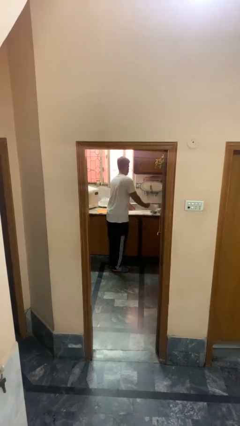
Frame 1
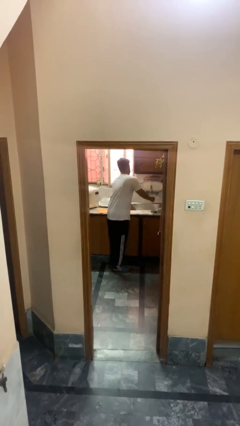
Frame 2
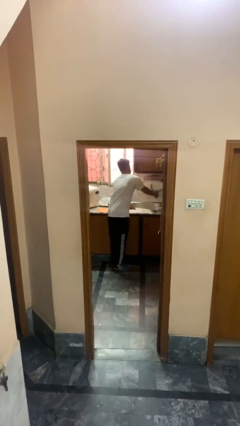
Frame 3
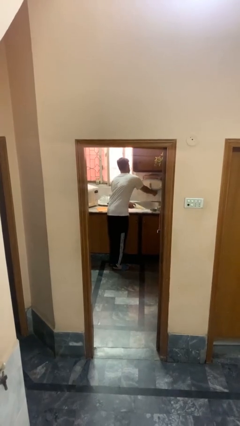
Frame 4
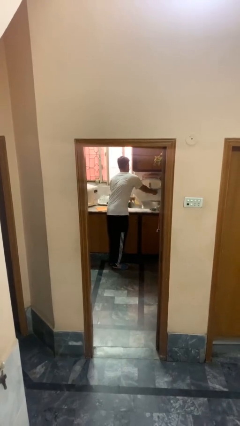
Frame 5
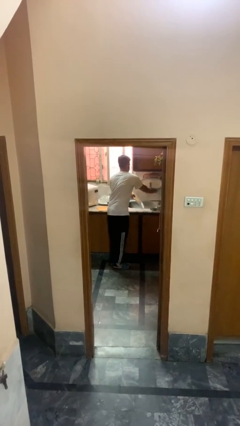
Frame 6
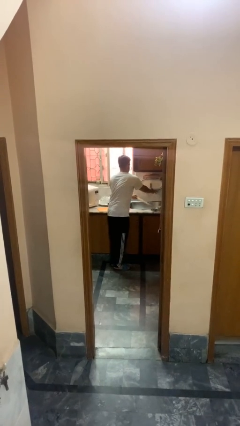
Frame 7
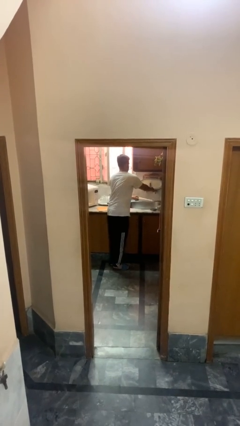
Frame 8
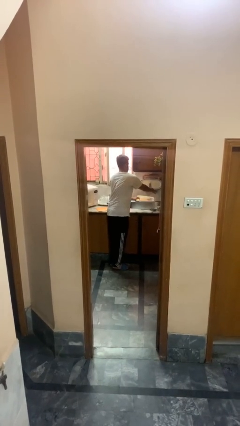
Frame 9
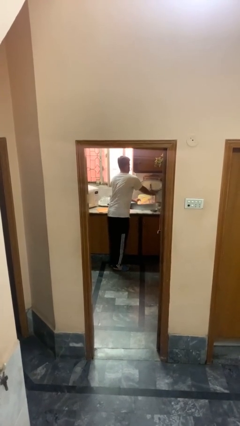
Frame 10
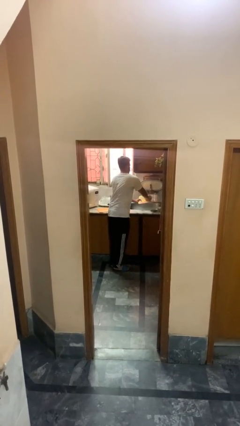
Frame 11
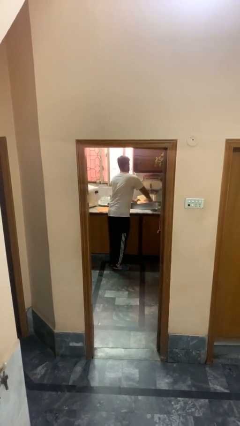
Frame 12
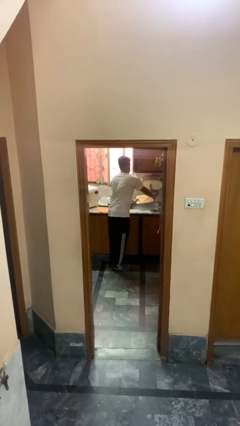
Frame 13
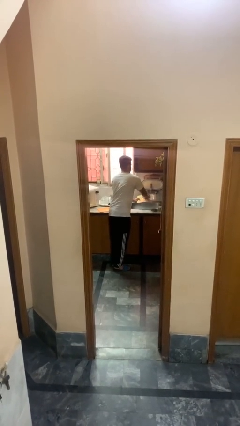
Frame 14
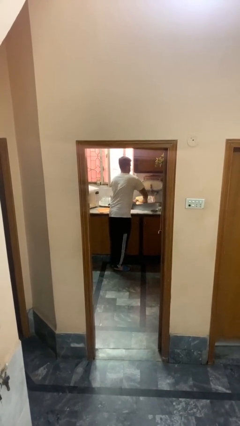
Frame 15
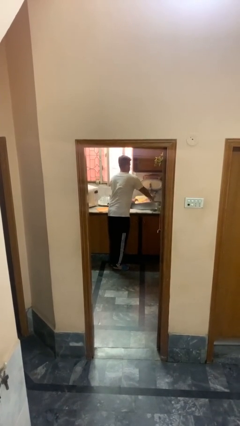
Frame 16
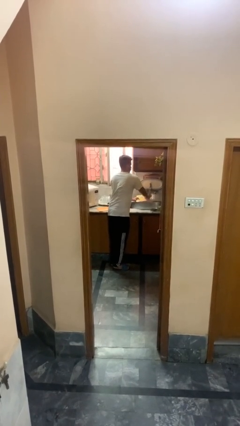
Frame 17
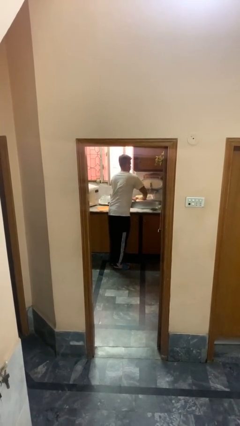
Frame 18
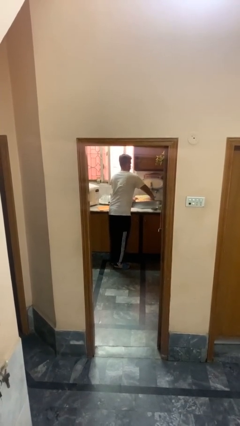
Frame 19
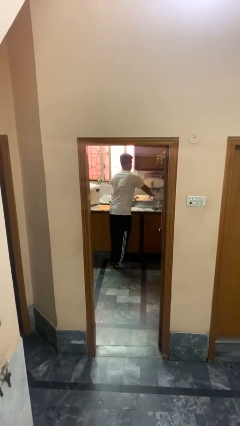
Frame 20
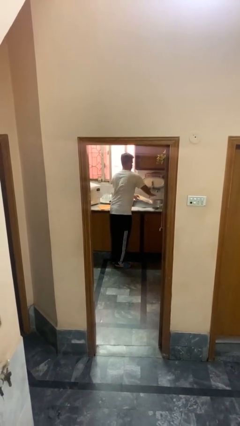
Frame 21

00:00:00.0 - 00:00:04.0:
person washes dish

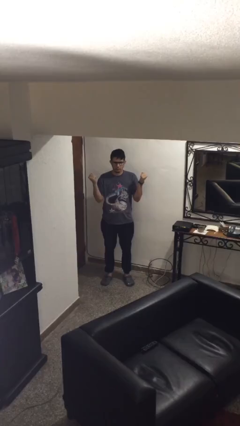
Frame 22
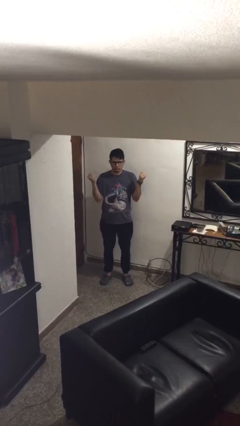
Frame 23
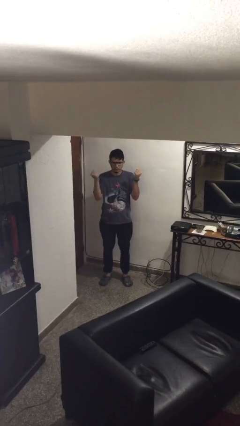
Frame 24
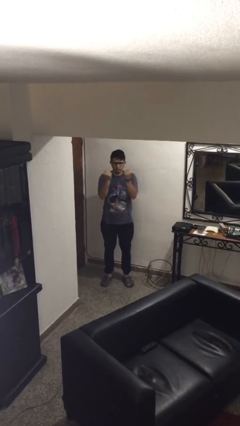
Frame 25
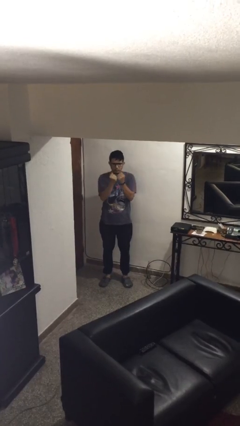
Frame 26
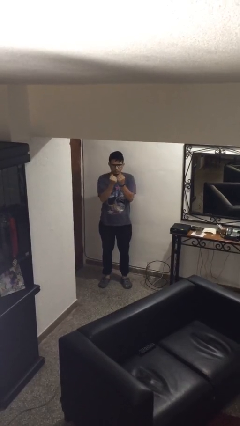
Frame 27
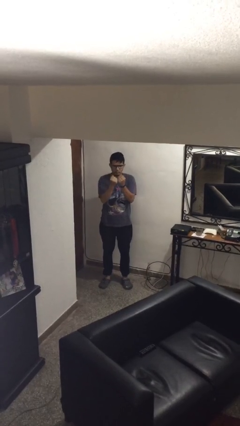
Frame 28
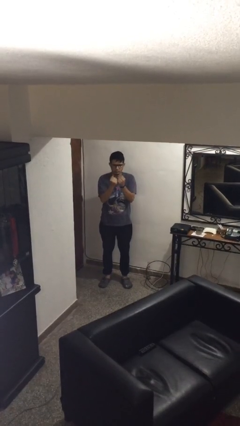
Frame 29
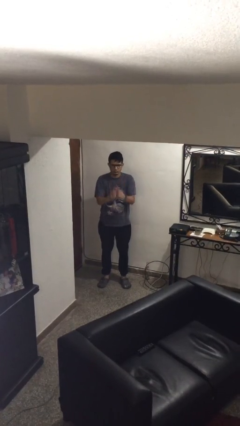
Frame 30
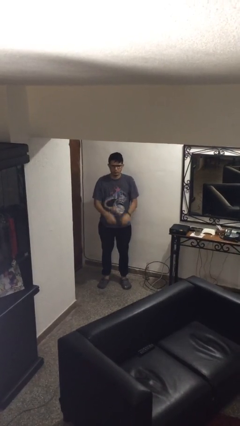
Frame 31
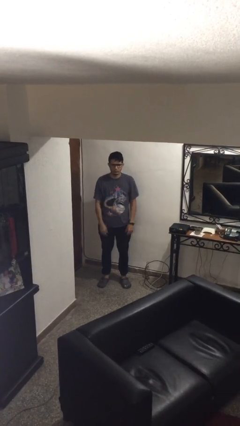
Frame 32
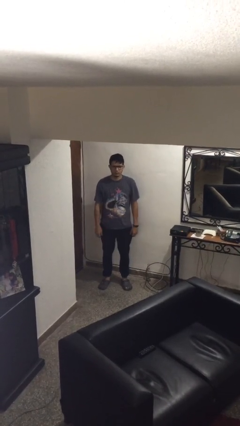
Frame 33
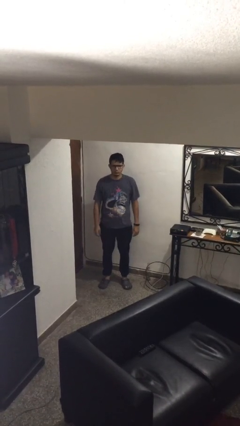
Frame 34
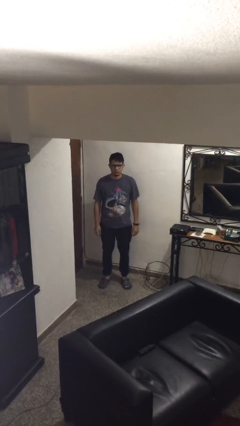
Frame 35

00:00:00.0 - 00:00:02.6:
person gestures zoom out

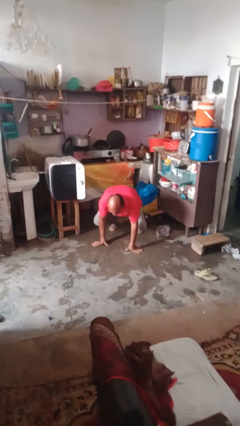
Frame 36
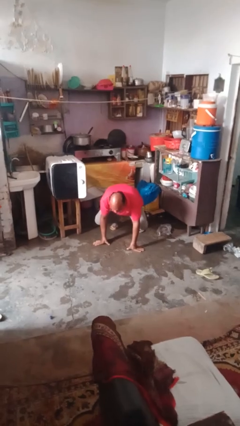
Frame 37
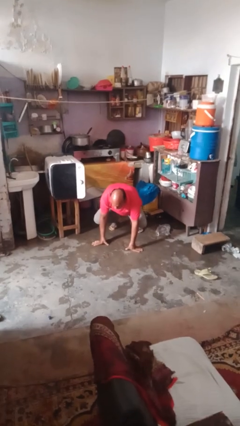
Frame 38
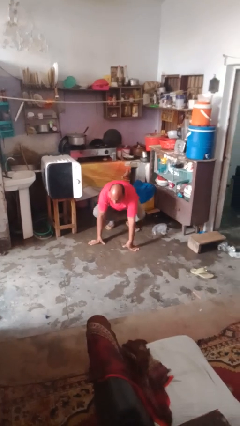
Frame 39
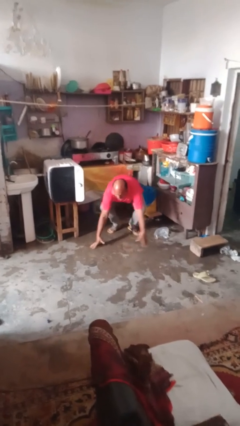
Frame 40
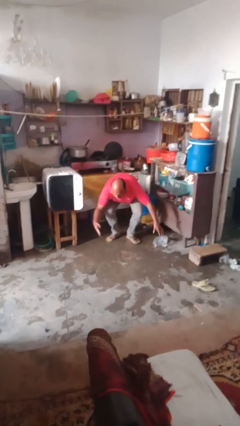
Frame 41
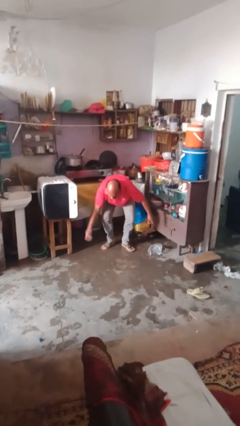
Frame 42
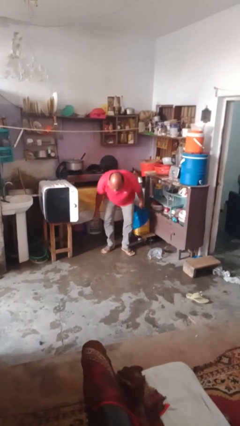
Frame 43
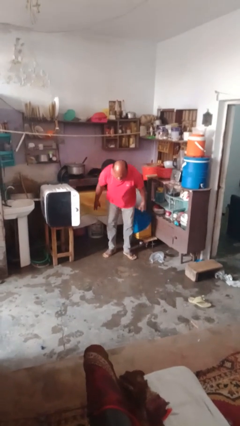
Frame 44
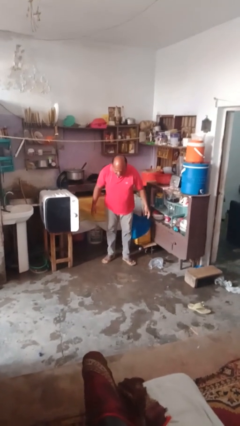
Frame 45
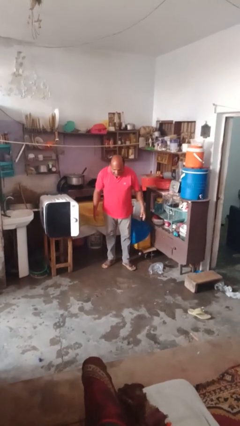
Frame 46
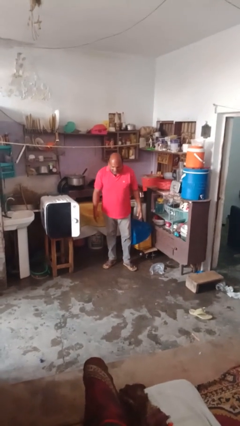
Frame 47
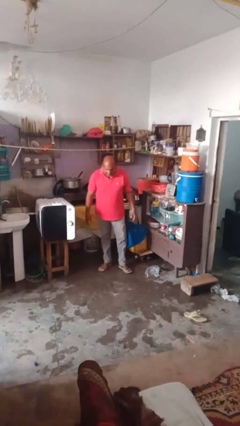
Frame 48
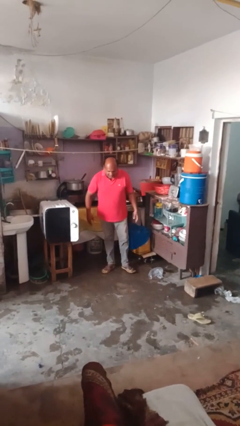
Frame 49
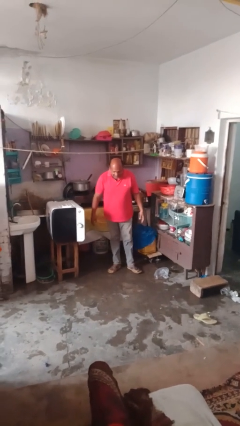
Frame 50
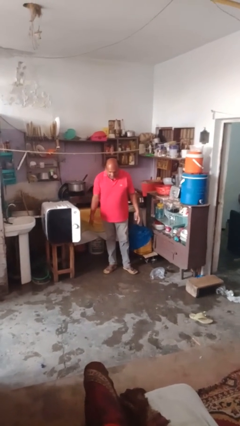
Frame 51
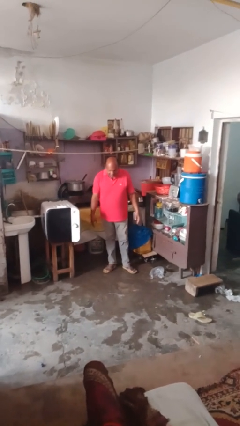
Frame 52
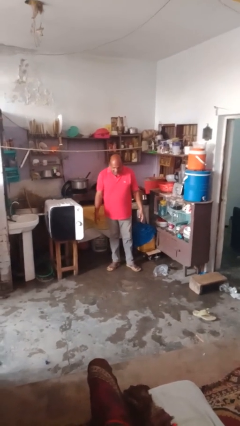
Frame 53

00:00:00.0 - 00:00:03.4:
person stands up from floor

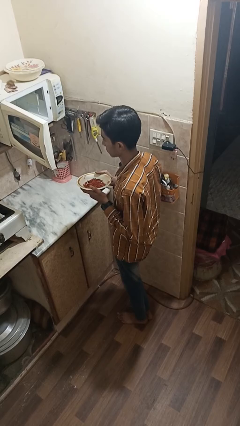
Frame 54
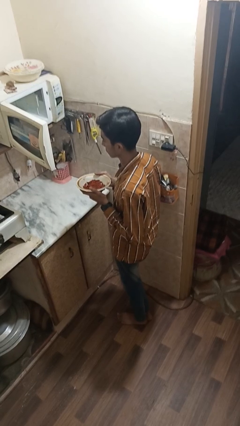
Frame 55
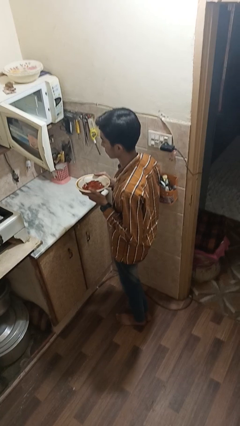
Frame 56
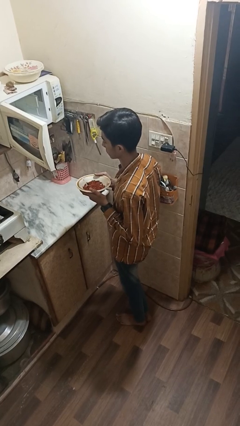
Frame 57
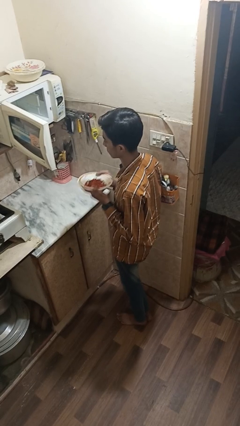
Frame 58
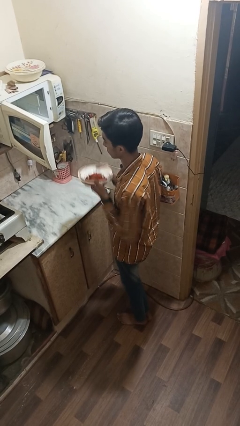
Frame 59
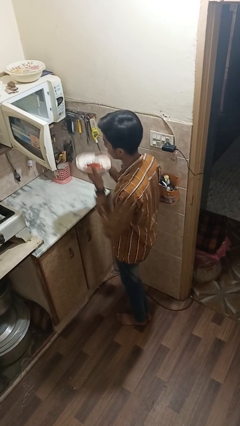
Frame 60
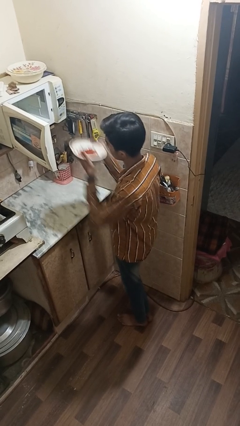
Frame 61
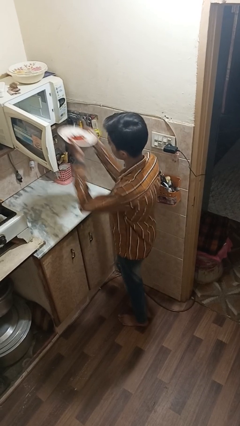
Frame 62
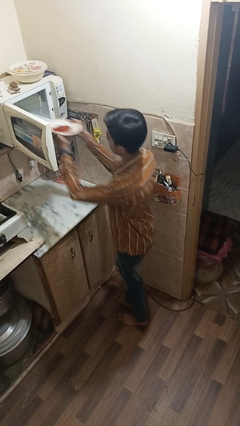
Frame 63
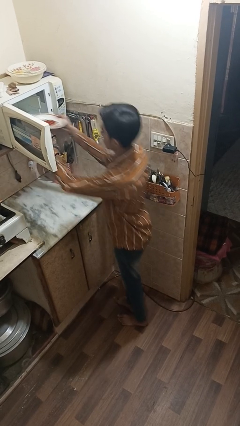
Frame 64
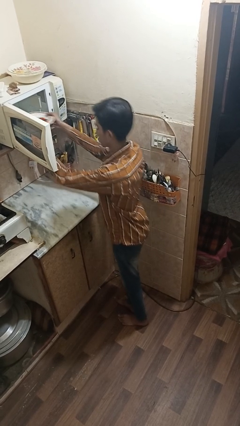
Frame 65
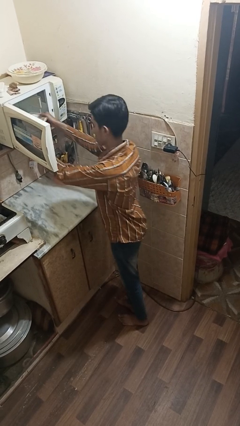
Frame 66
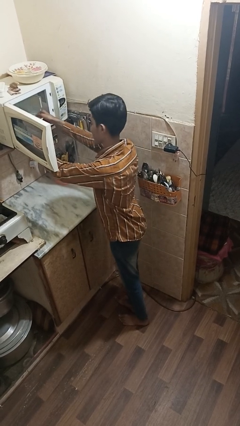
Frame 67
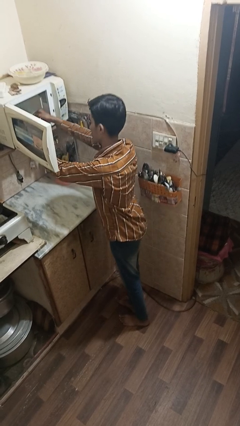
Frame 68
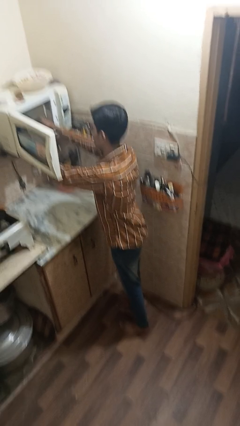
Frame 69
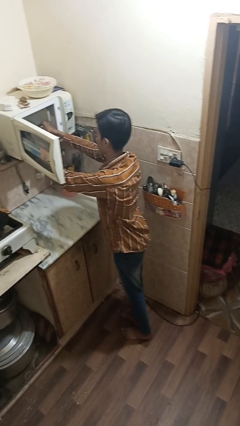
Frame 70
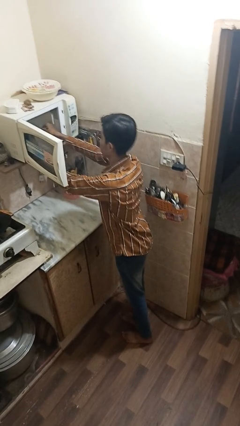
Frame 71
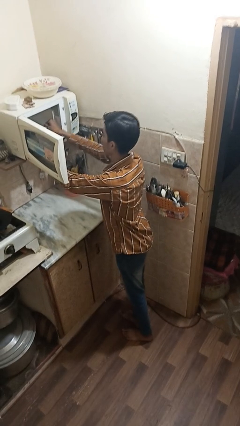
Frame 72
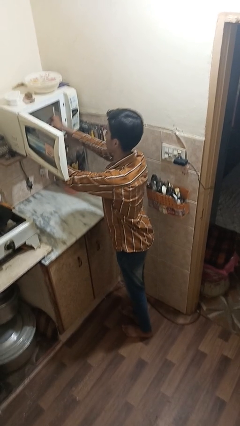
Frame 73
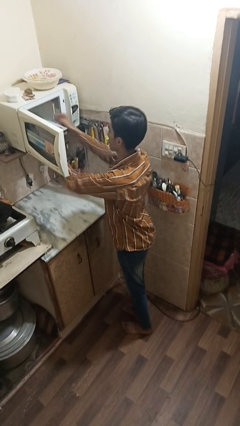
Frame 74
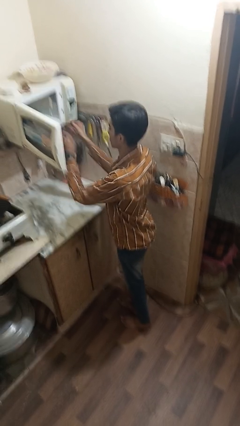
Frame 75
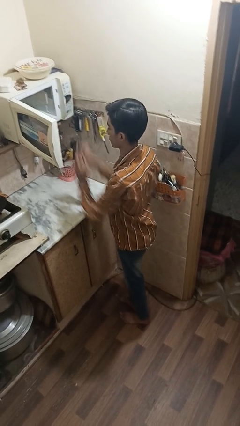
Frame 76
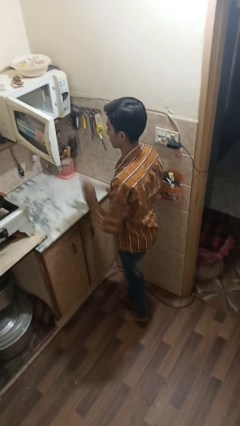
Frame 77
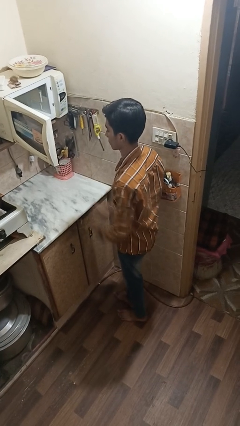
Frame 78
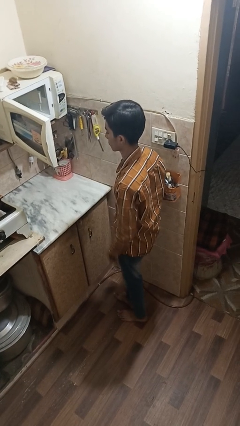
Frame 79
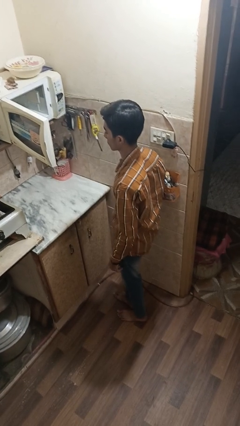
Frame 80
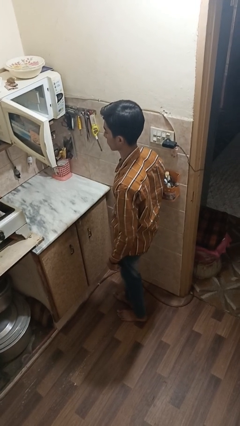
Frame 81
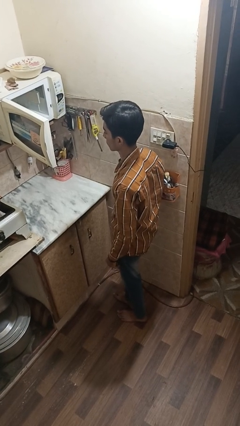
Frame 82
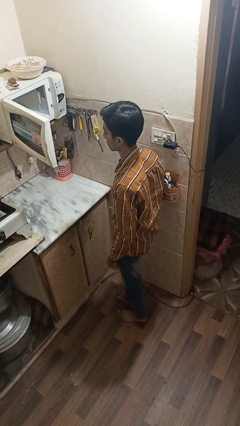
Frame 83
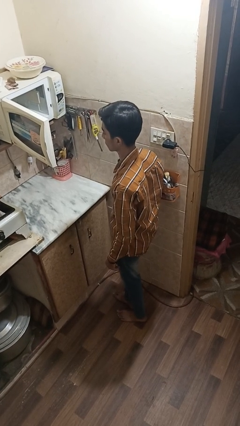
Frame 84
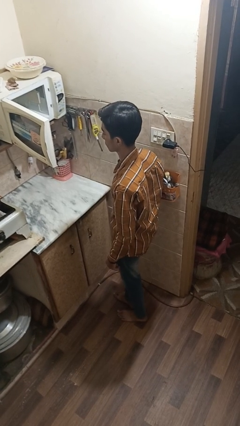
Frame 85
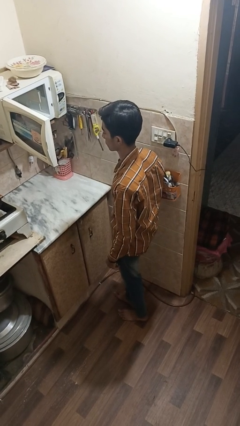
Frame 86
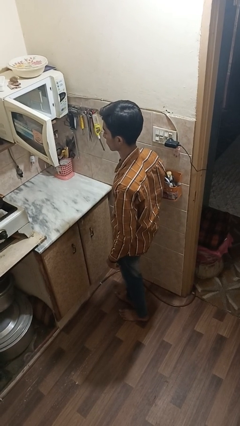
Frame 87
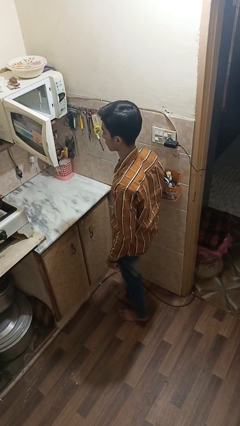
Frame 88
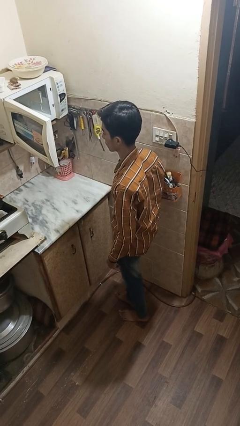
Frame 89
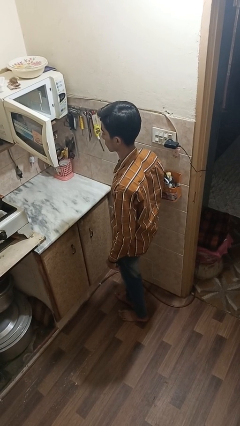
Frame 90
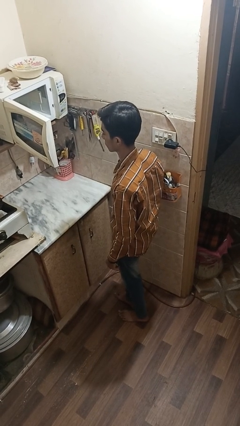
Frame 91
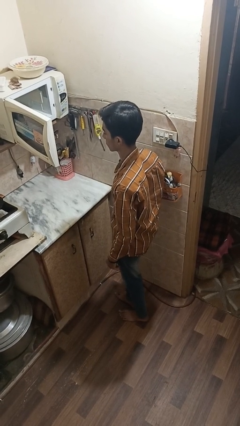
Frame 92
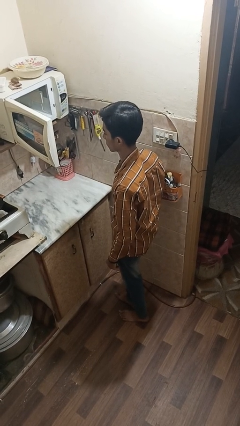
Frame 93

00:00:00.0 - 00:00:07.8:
person puts object into microwave
